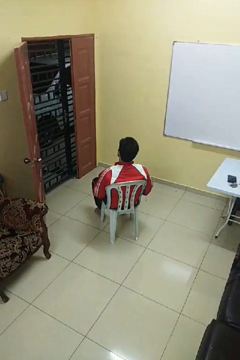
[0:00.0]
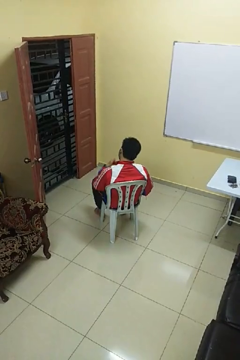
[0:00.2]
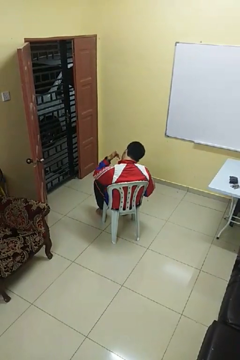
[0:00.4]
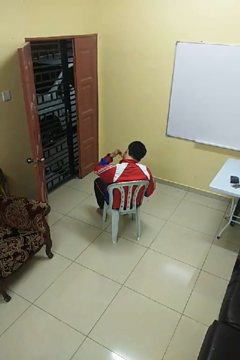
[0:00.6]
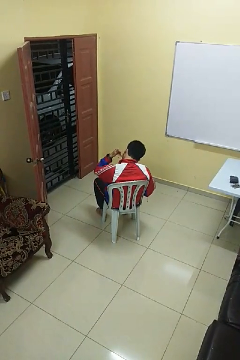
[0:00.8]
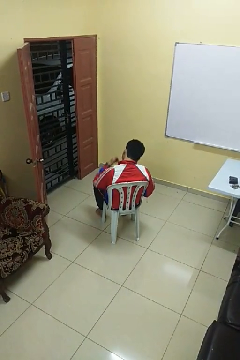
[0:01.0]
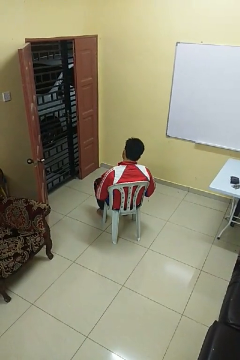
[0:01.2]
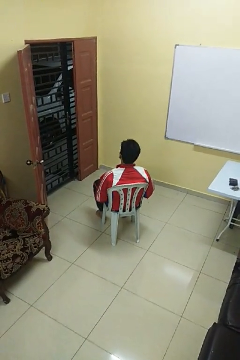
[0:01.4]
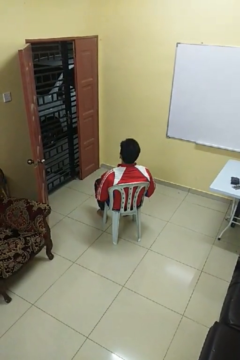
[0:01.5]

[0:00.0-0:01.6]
person gestures call me

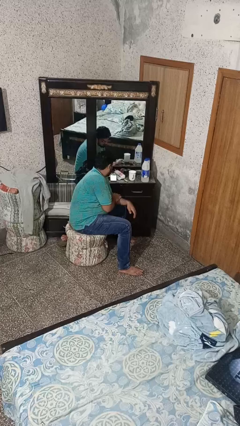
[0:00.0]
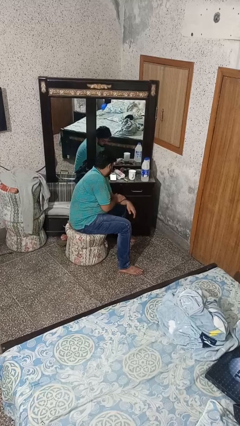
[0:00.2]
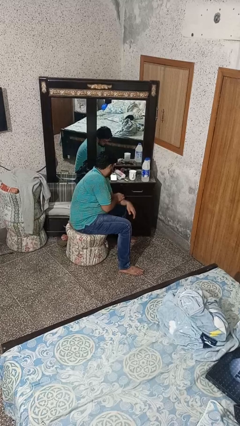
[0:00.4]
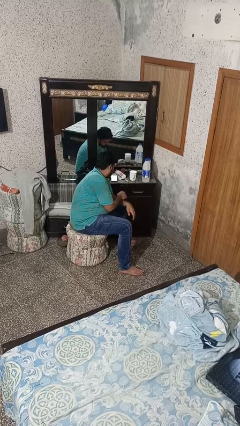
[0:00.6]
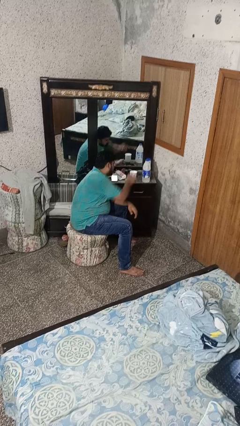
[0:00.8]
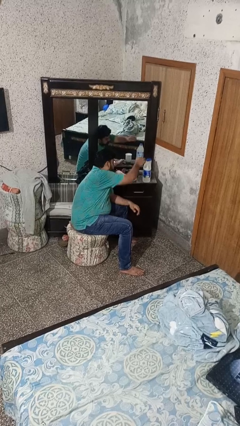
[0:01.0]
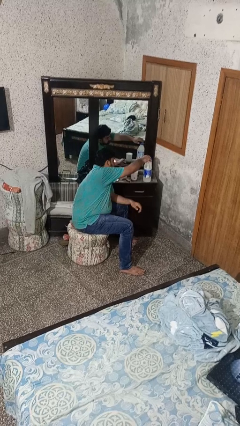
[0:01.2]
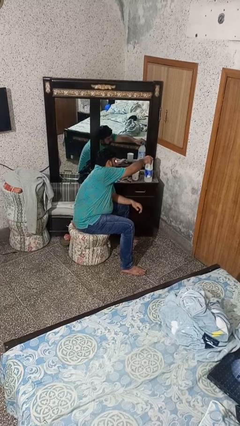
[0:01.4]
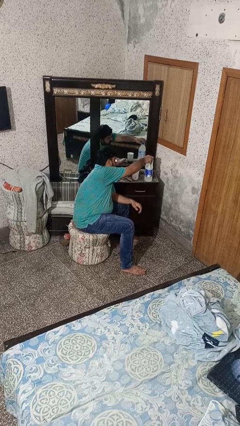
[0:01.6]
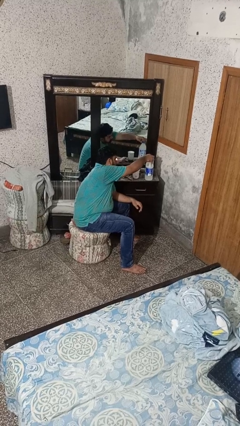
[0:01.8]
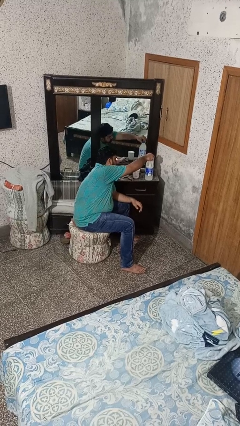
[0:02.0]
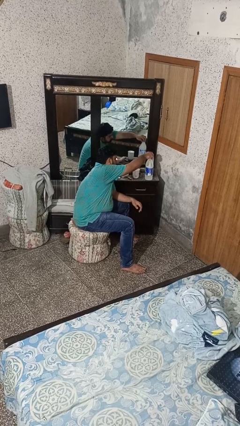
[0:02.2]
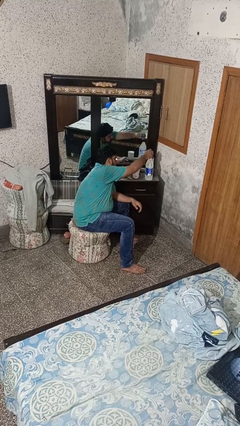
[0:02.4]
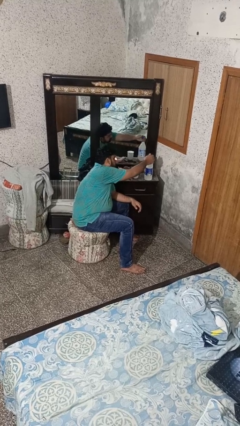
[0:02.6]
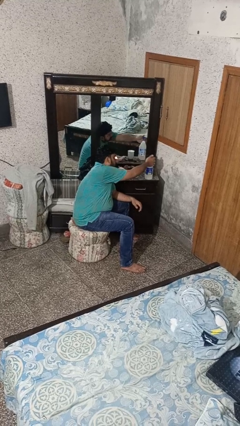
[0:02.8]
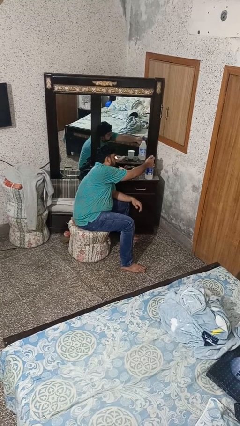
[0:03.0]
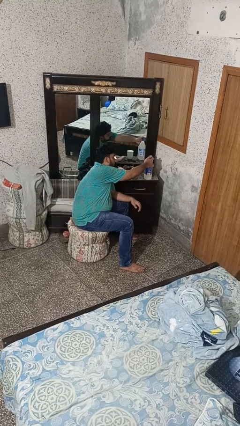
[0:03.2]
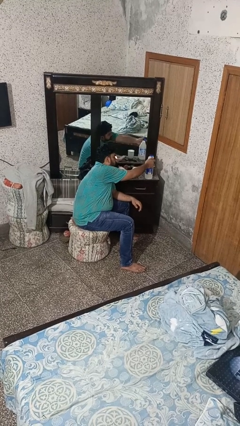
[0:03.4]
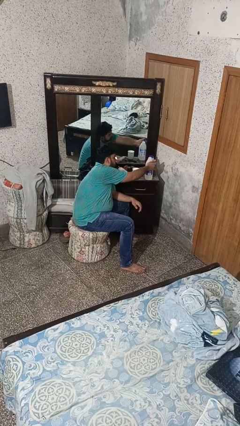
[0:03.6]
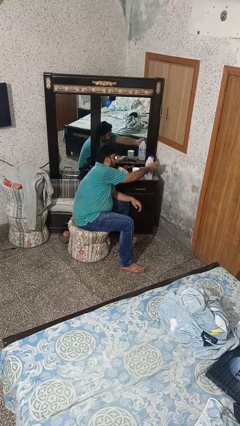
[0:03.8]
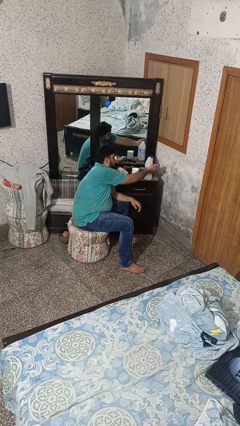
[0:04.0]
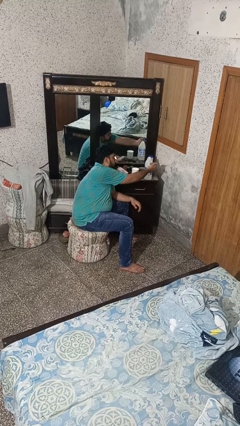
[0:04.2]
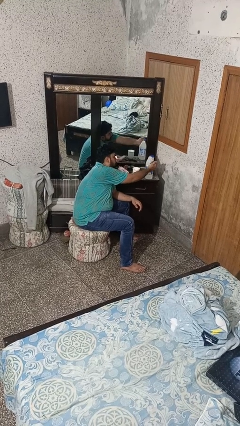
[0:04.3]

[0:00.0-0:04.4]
person unscrews lid from bottle

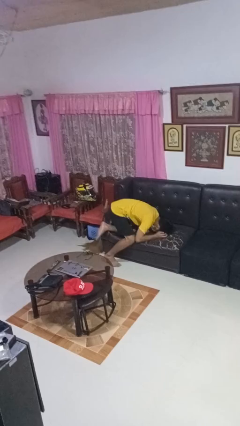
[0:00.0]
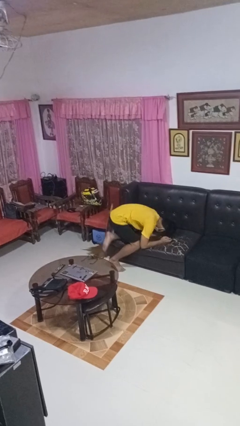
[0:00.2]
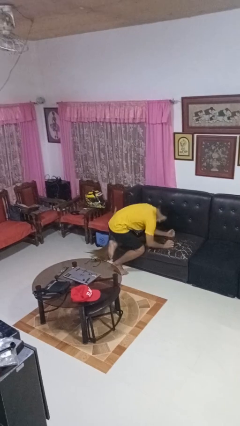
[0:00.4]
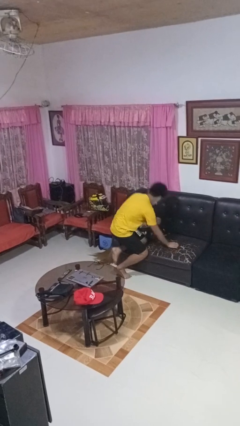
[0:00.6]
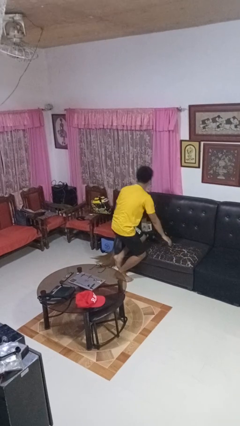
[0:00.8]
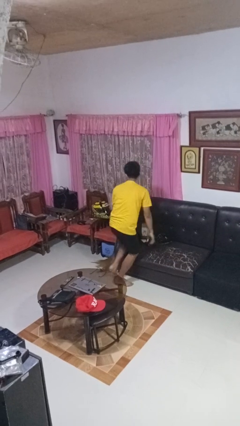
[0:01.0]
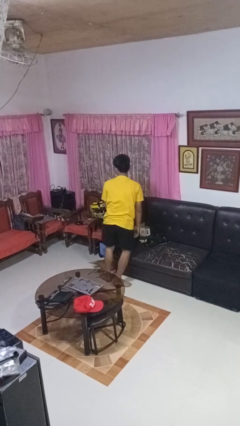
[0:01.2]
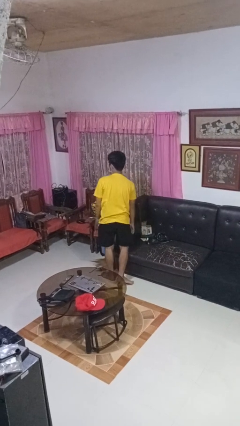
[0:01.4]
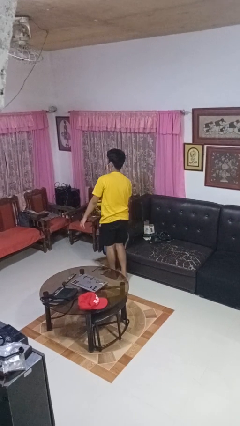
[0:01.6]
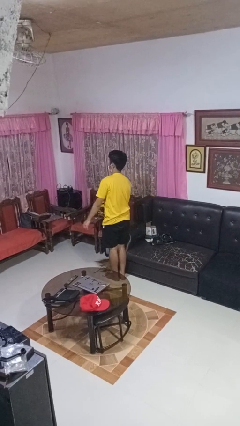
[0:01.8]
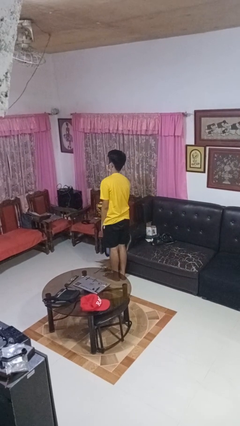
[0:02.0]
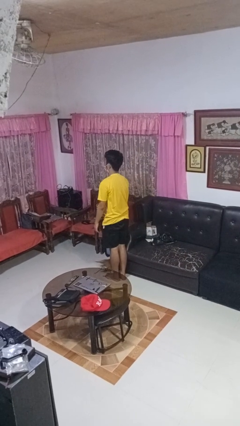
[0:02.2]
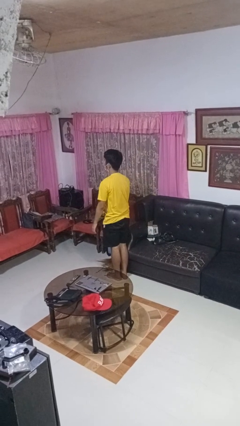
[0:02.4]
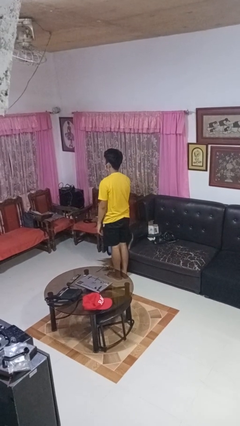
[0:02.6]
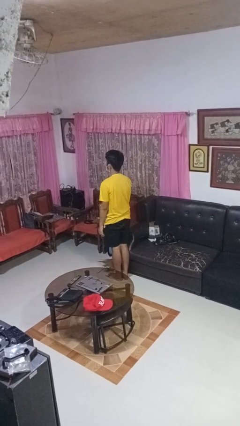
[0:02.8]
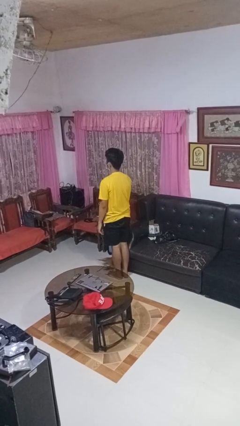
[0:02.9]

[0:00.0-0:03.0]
person stands up

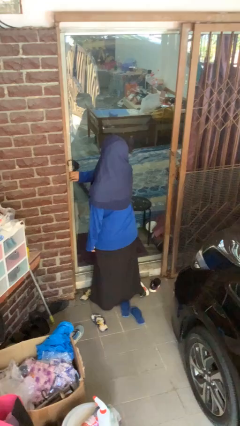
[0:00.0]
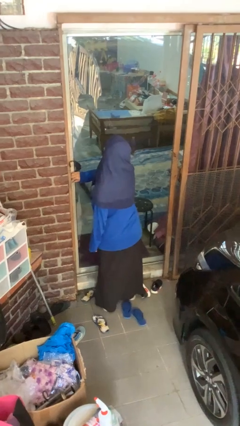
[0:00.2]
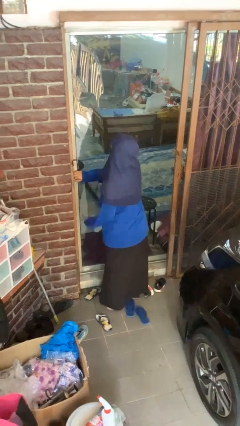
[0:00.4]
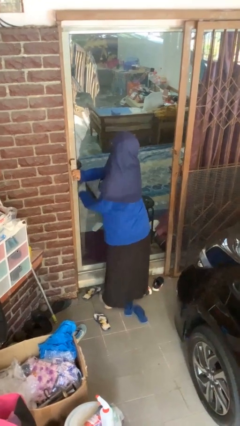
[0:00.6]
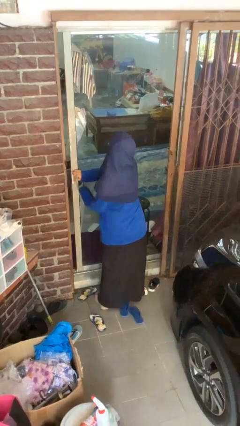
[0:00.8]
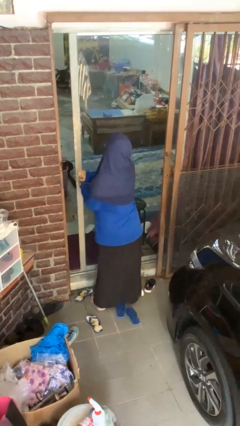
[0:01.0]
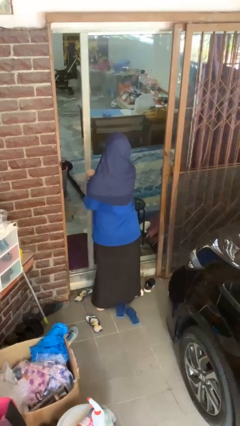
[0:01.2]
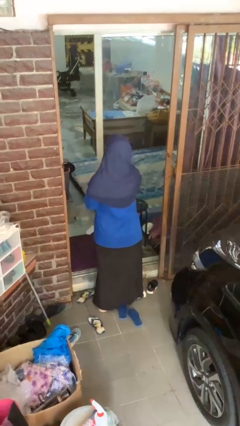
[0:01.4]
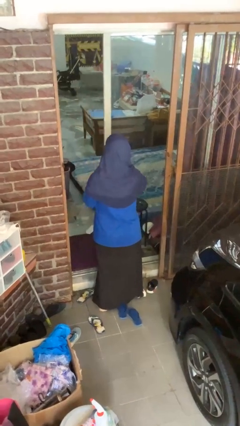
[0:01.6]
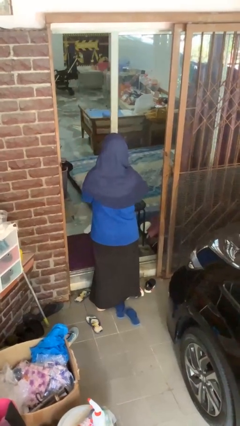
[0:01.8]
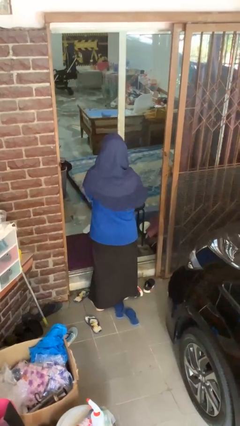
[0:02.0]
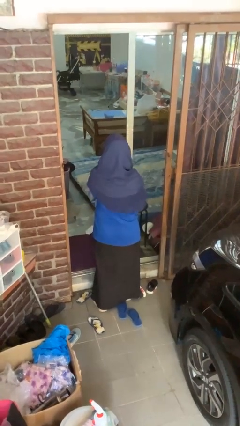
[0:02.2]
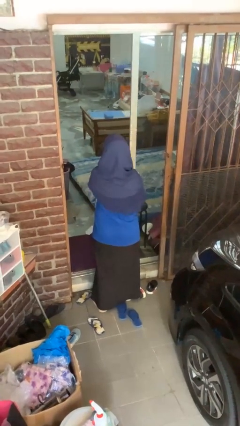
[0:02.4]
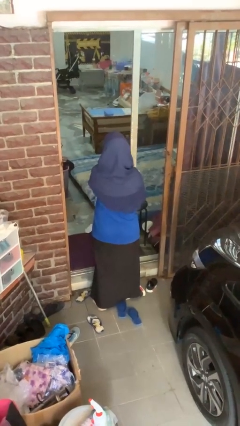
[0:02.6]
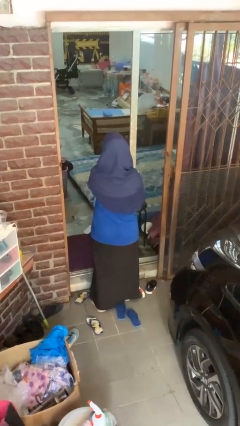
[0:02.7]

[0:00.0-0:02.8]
person opens sliding door

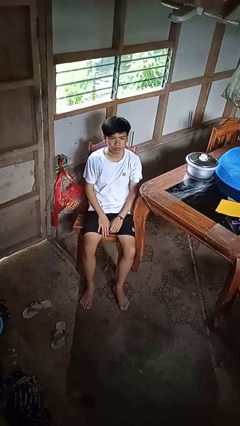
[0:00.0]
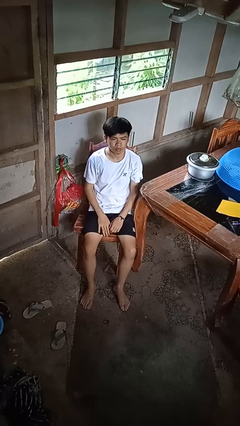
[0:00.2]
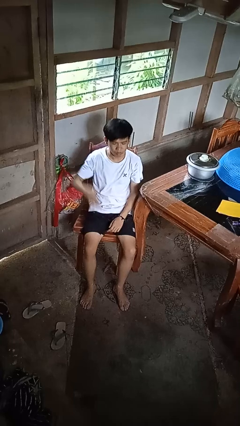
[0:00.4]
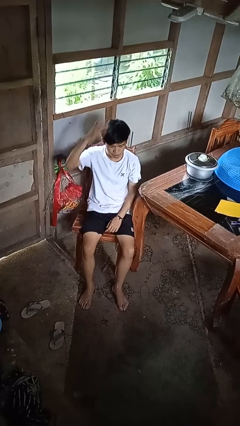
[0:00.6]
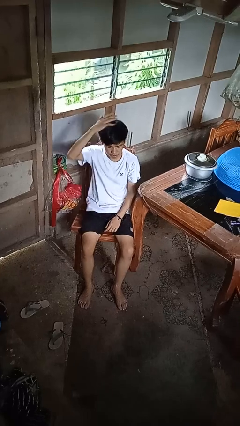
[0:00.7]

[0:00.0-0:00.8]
person pats head

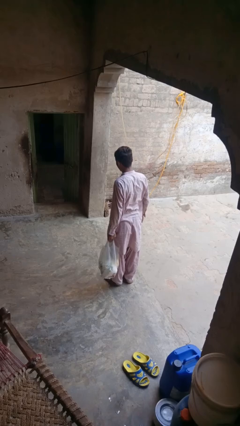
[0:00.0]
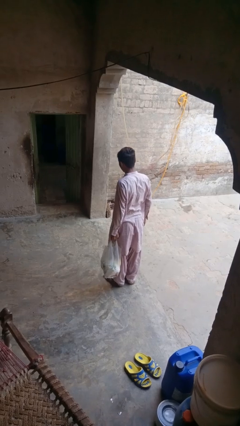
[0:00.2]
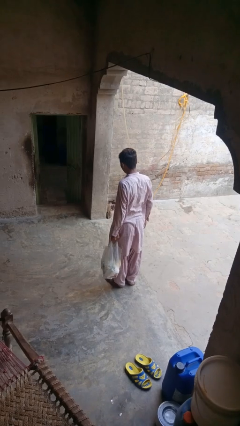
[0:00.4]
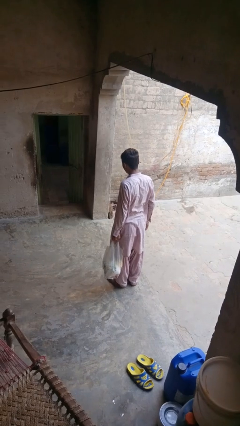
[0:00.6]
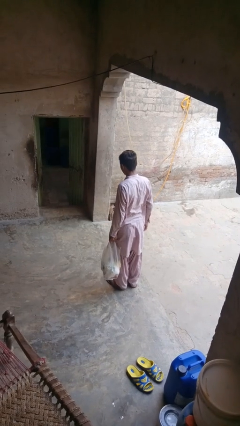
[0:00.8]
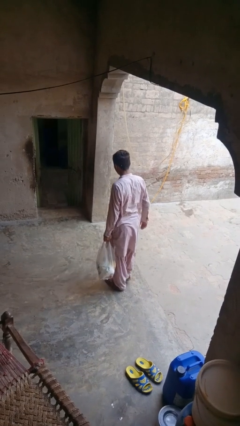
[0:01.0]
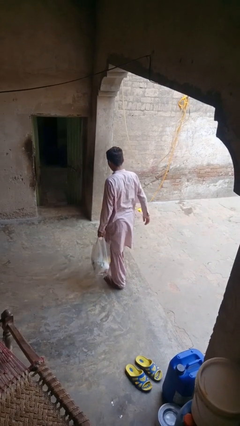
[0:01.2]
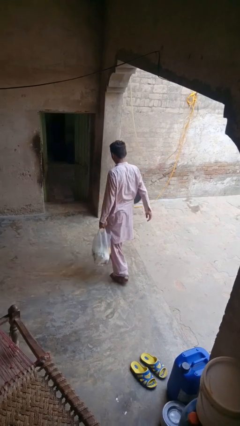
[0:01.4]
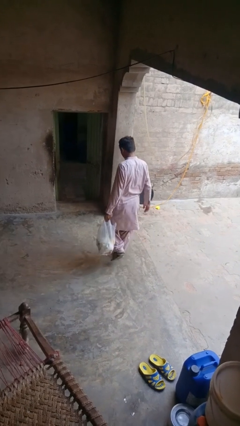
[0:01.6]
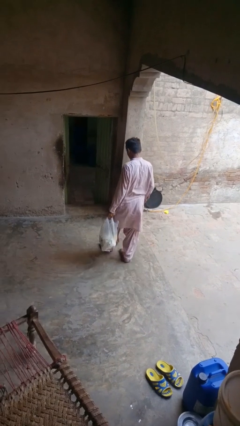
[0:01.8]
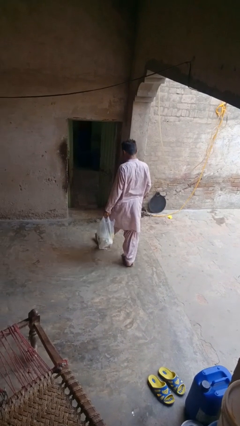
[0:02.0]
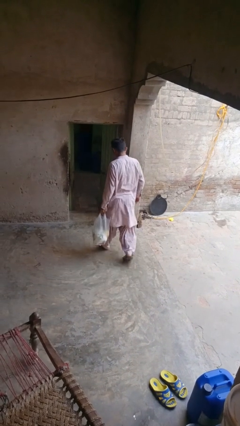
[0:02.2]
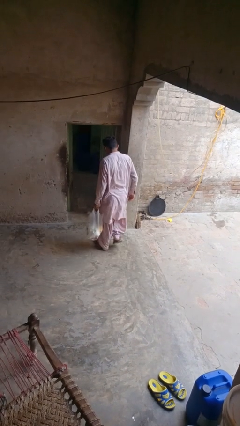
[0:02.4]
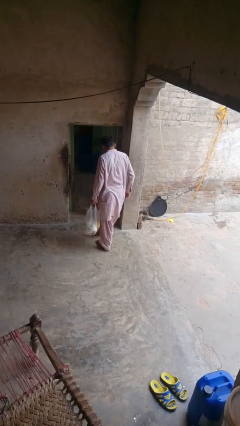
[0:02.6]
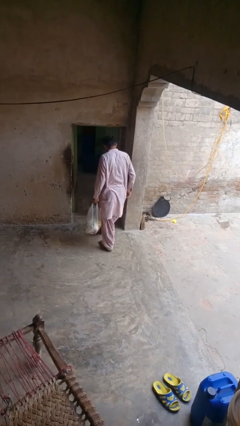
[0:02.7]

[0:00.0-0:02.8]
person carries groceries

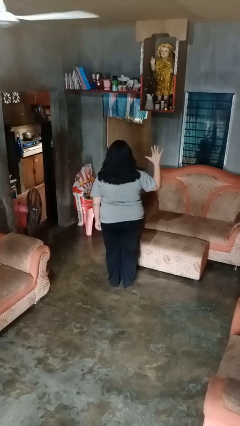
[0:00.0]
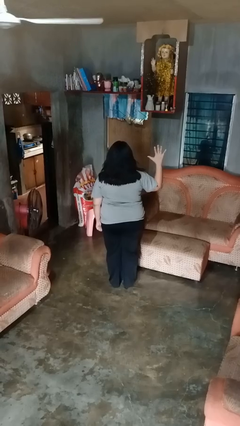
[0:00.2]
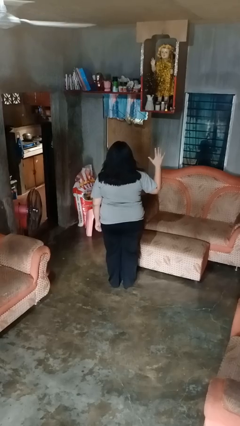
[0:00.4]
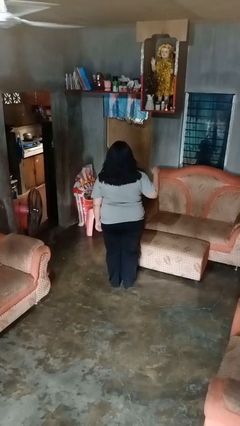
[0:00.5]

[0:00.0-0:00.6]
person gestures number five

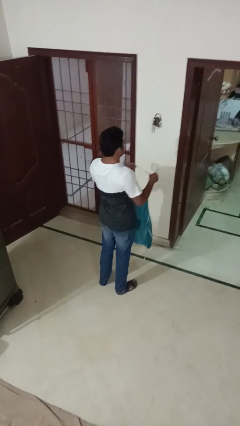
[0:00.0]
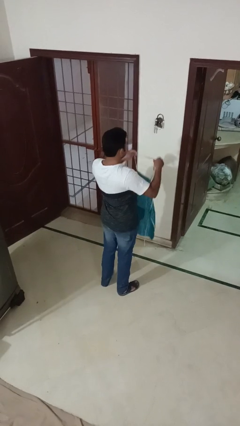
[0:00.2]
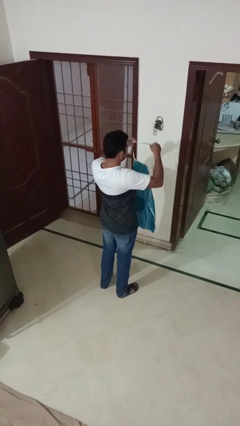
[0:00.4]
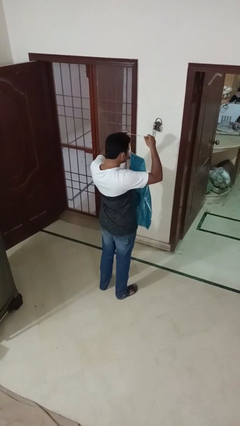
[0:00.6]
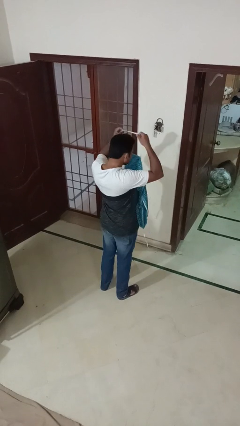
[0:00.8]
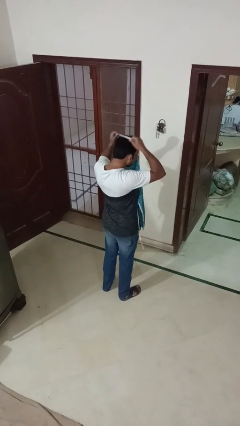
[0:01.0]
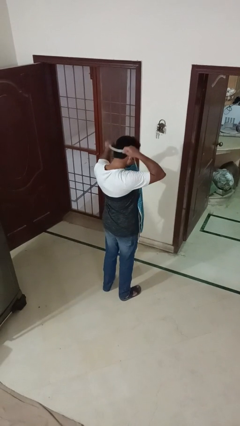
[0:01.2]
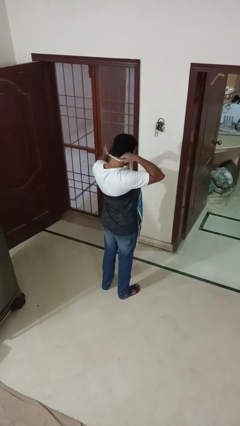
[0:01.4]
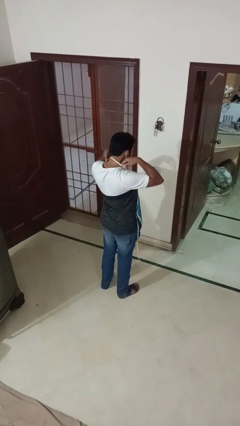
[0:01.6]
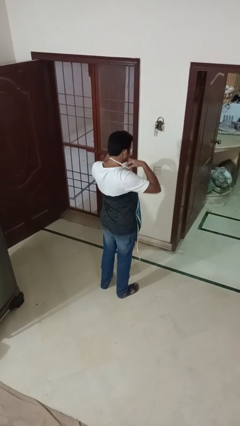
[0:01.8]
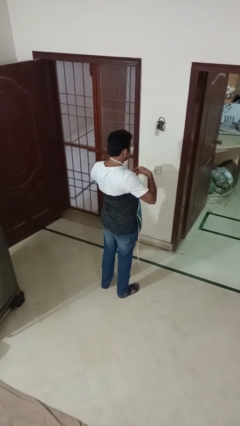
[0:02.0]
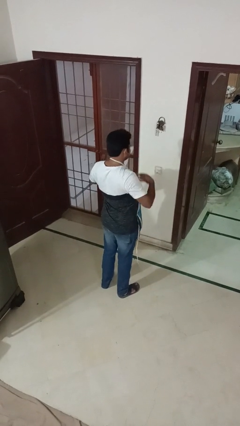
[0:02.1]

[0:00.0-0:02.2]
person puts on apron
